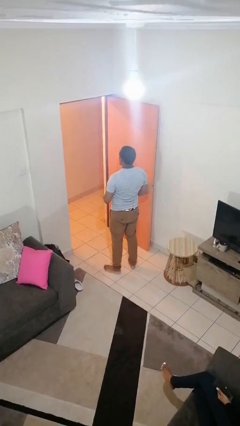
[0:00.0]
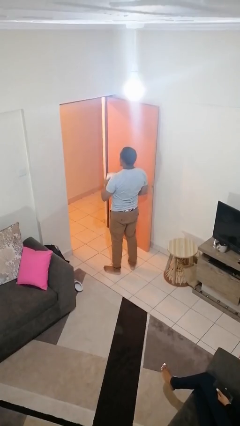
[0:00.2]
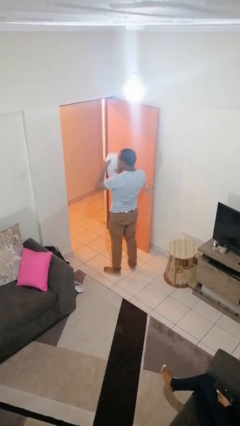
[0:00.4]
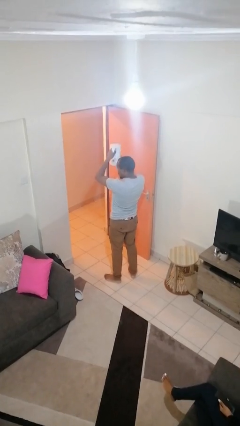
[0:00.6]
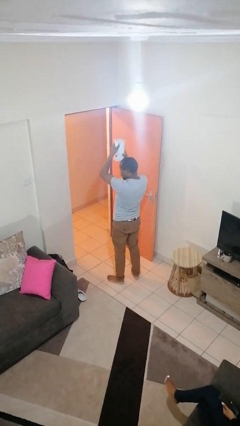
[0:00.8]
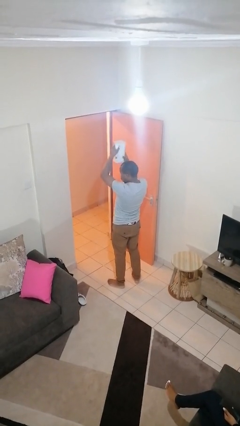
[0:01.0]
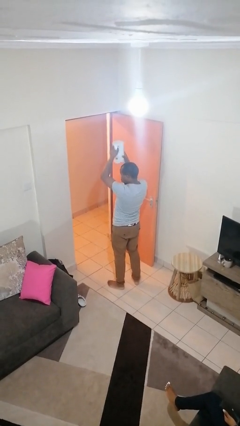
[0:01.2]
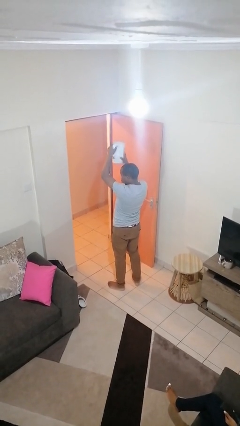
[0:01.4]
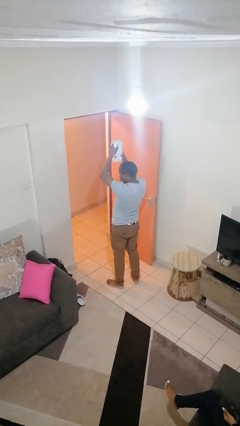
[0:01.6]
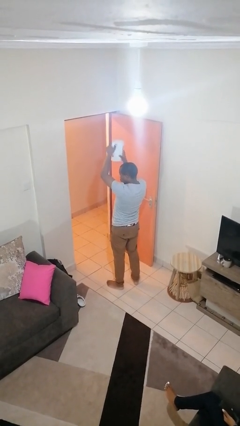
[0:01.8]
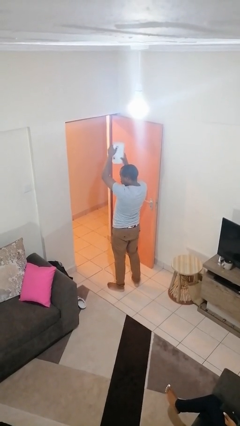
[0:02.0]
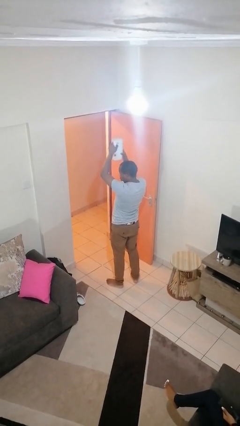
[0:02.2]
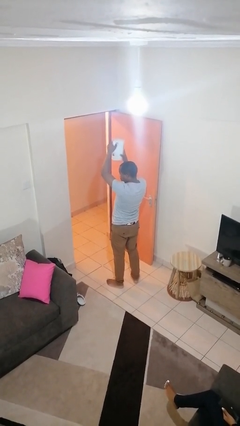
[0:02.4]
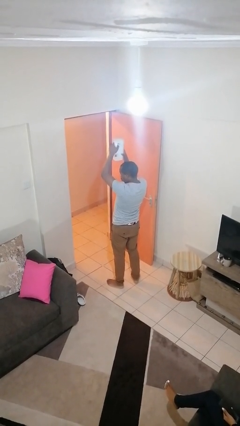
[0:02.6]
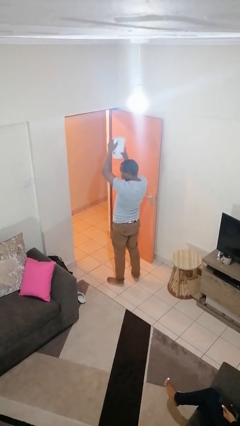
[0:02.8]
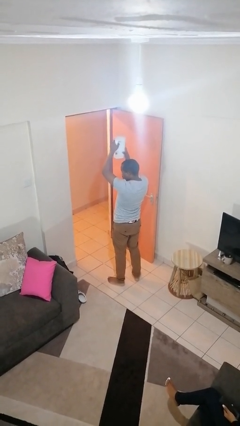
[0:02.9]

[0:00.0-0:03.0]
person holds object above head

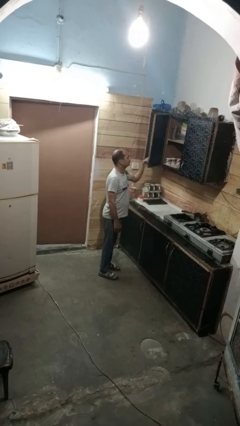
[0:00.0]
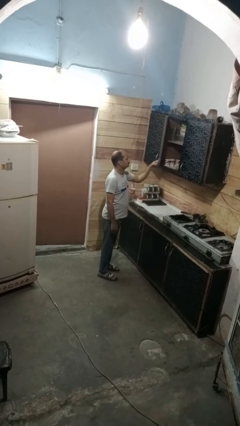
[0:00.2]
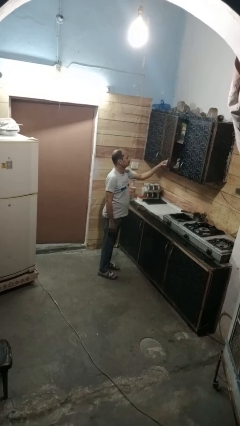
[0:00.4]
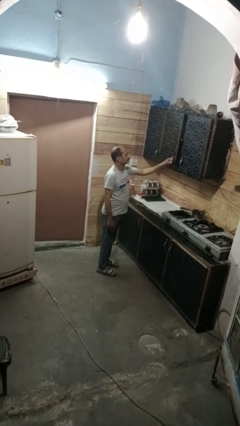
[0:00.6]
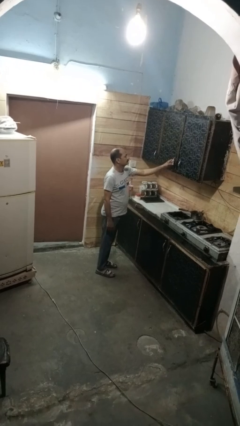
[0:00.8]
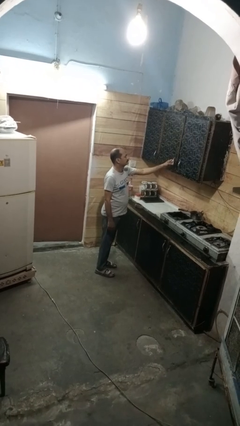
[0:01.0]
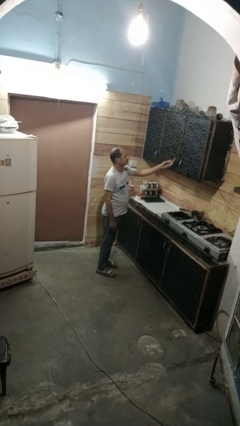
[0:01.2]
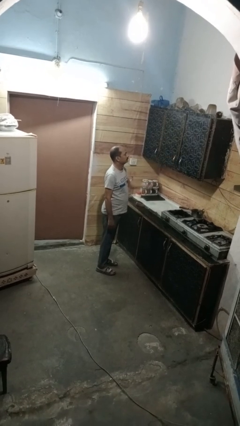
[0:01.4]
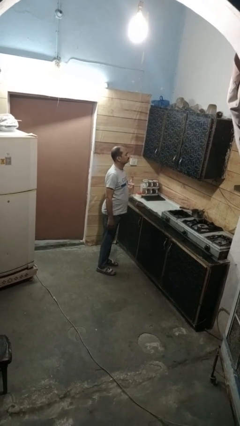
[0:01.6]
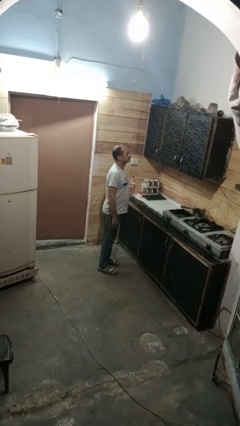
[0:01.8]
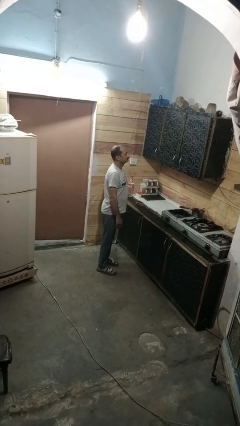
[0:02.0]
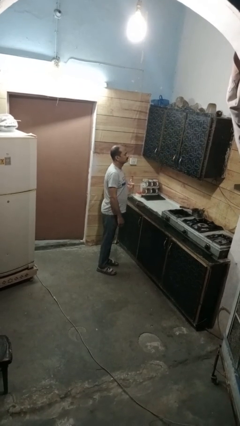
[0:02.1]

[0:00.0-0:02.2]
person closes cabinet

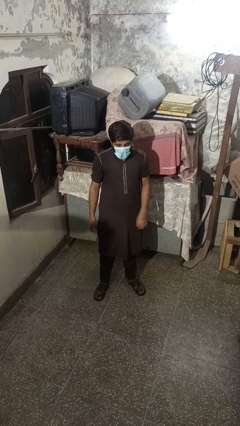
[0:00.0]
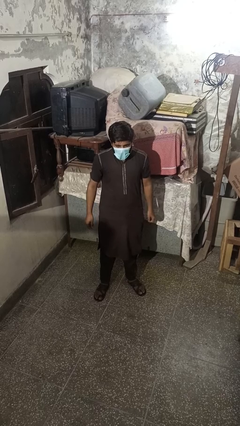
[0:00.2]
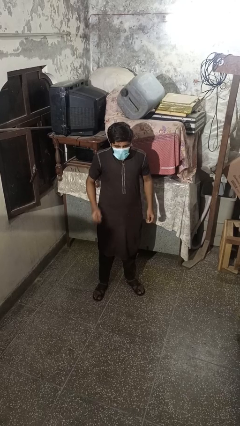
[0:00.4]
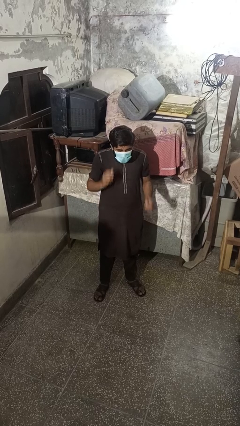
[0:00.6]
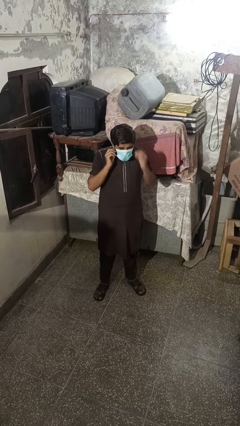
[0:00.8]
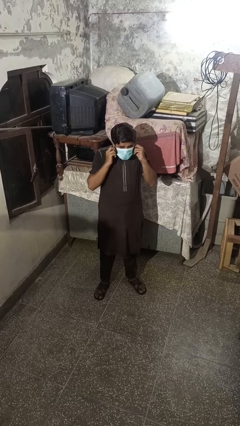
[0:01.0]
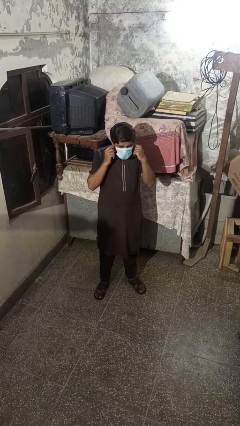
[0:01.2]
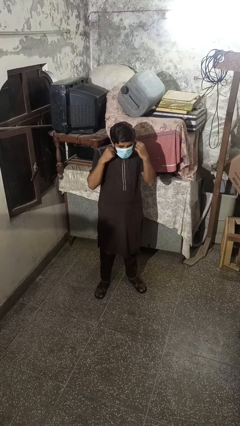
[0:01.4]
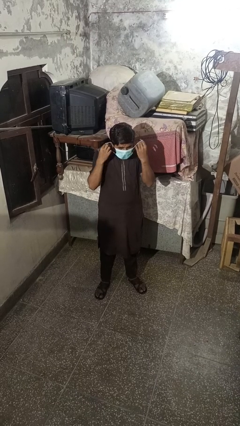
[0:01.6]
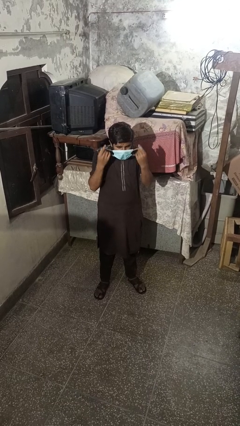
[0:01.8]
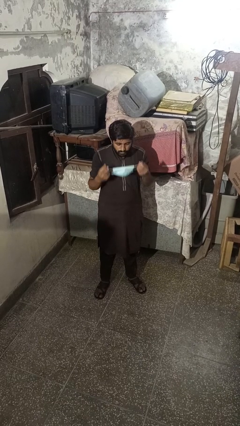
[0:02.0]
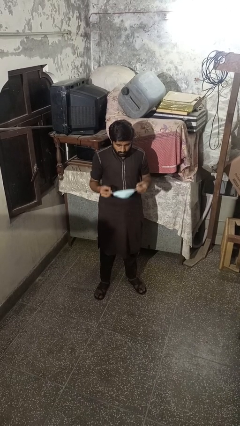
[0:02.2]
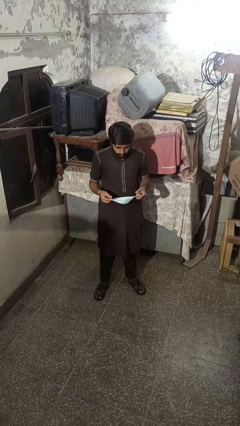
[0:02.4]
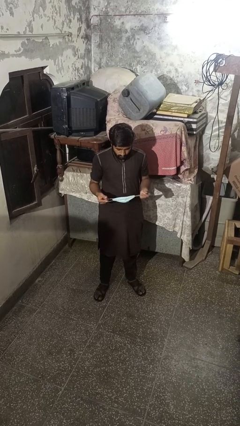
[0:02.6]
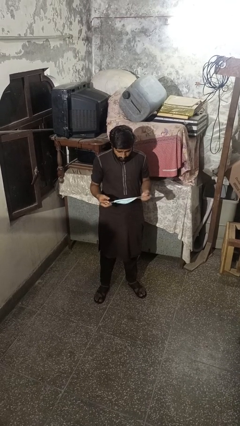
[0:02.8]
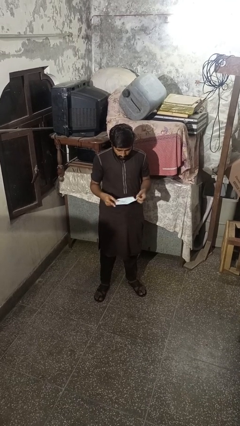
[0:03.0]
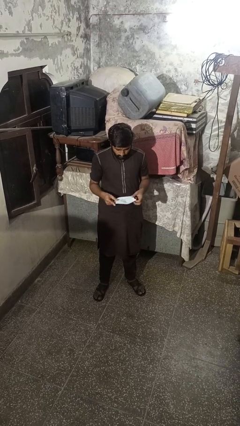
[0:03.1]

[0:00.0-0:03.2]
person takes off facemask

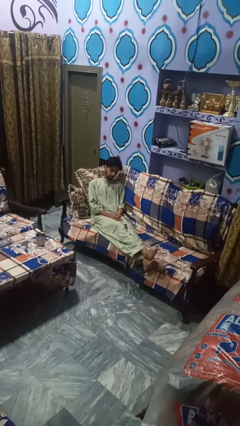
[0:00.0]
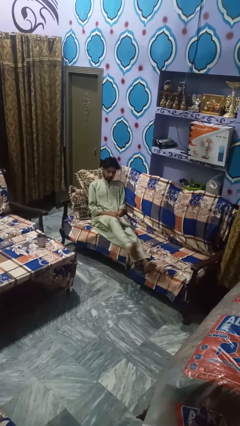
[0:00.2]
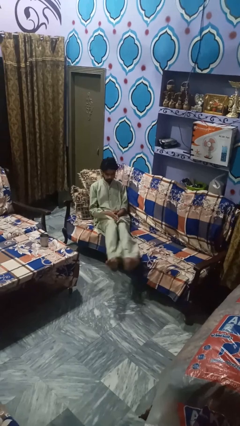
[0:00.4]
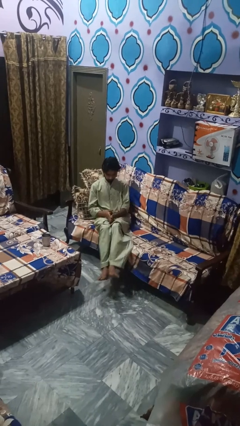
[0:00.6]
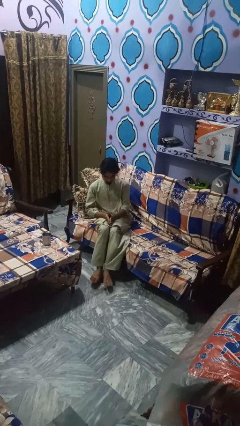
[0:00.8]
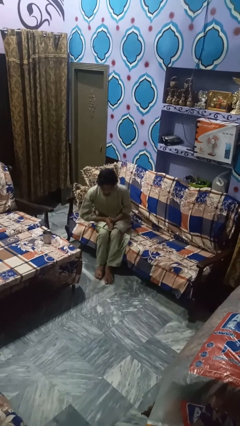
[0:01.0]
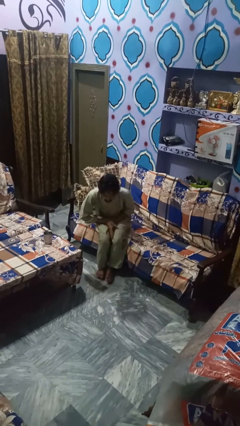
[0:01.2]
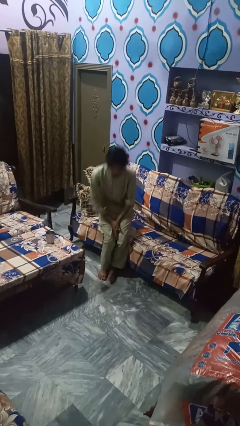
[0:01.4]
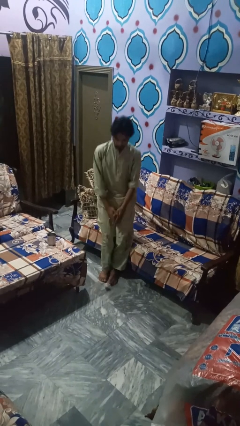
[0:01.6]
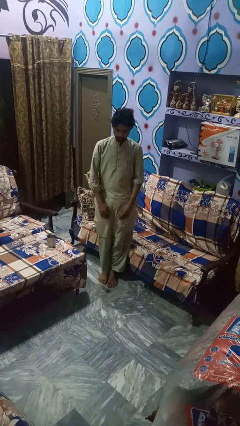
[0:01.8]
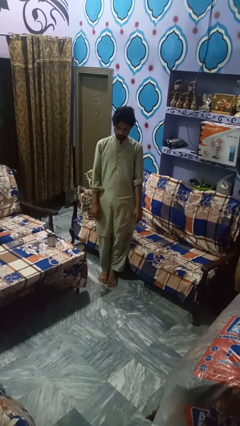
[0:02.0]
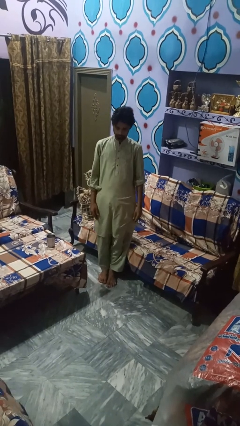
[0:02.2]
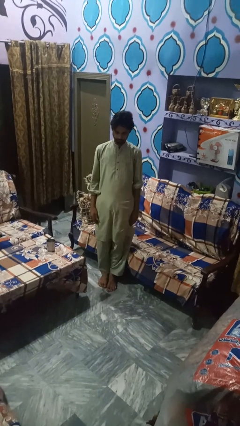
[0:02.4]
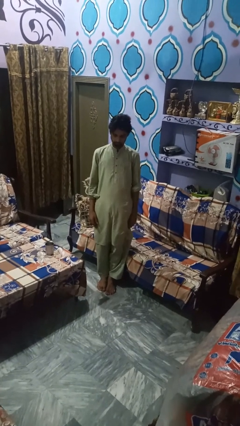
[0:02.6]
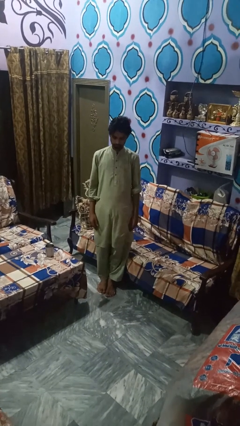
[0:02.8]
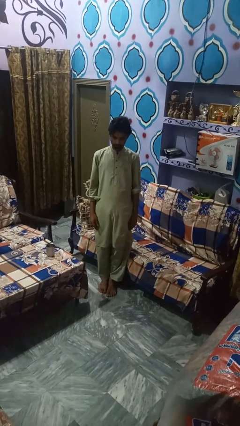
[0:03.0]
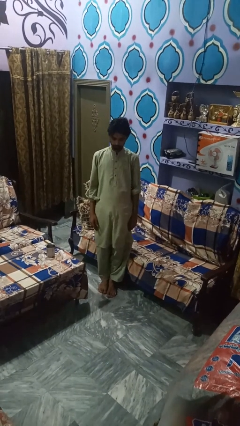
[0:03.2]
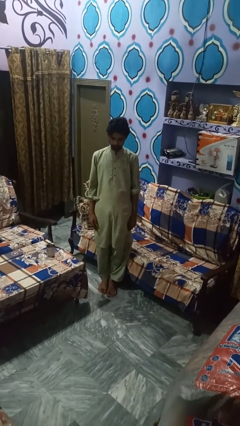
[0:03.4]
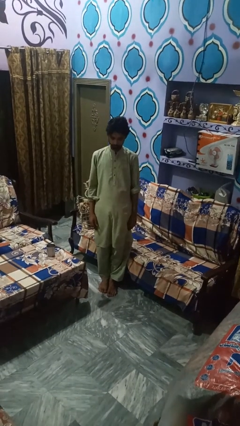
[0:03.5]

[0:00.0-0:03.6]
person stands up

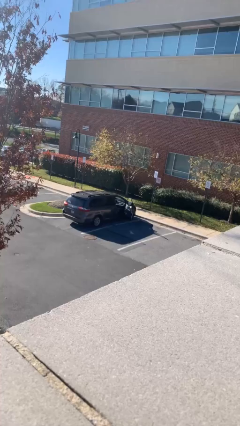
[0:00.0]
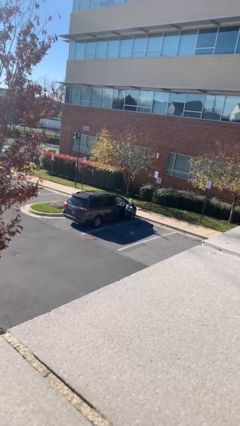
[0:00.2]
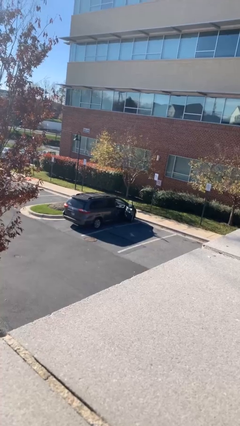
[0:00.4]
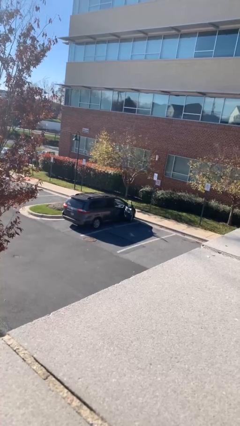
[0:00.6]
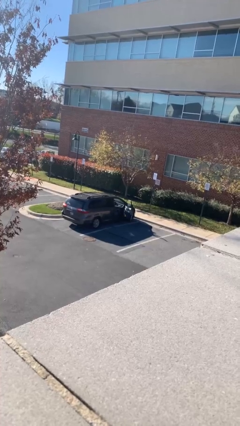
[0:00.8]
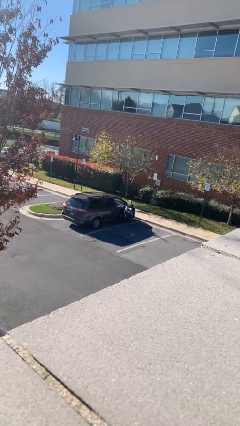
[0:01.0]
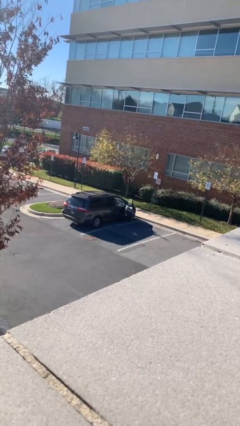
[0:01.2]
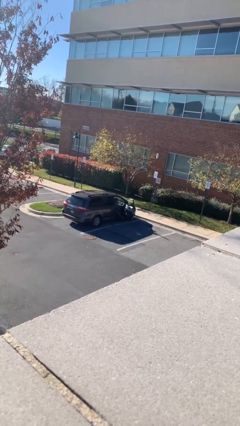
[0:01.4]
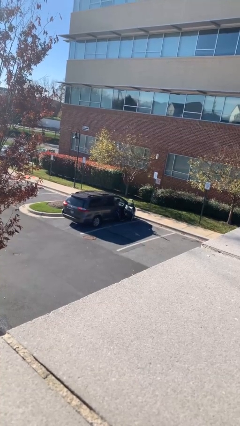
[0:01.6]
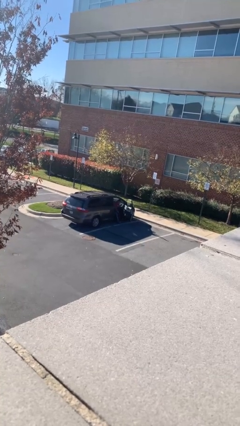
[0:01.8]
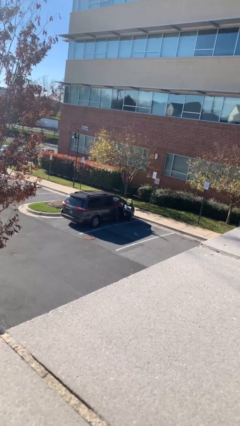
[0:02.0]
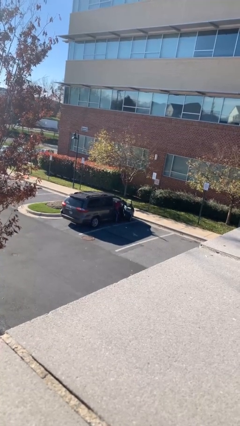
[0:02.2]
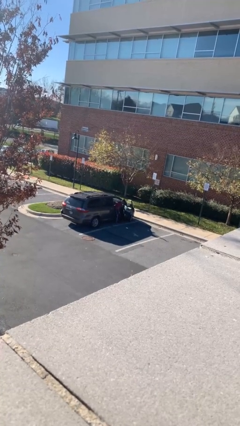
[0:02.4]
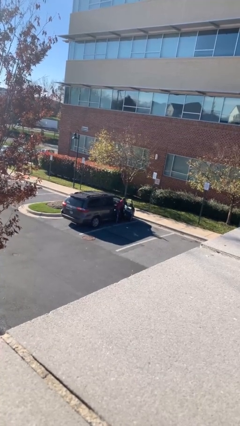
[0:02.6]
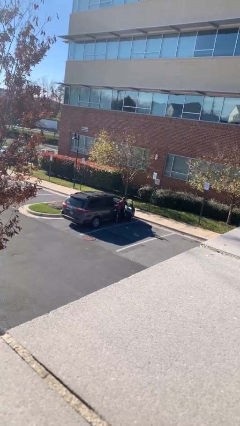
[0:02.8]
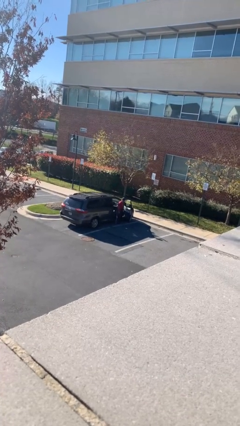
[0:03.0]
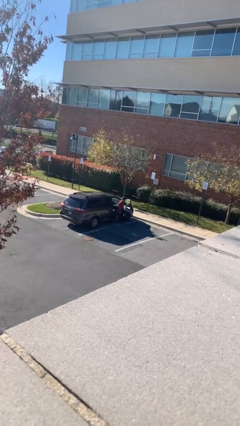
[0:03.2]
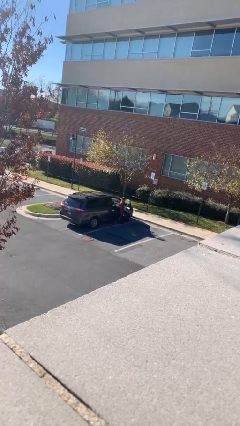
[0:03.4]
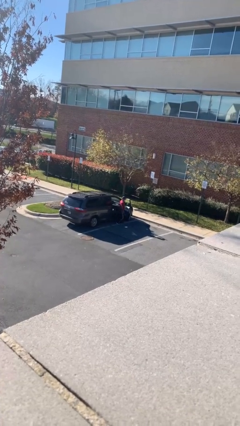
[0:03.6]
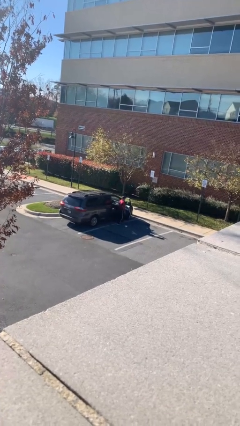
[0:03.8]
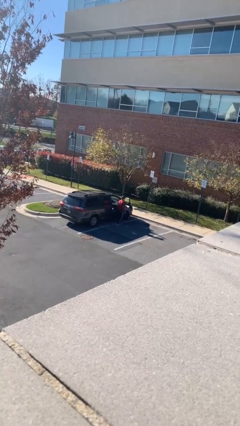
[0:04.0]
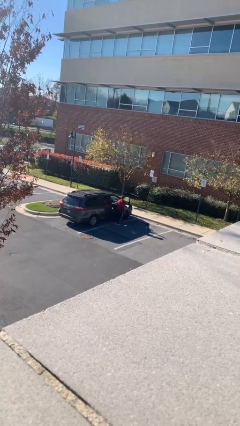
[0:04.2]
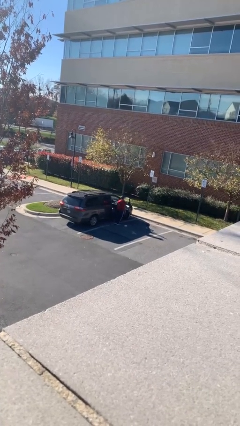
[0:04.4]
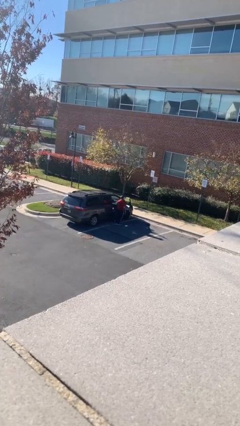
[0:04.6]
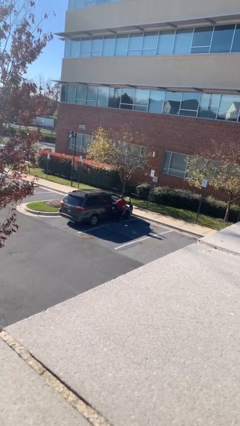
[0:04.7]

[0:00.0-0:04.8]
person exits car

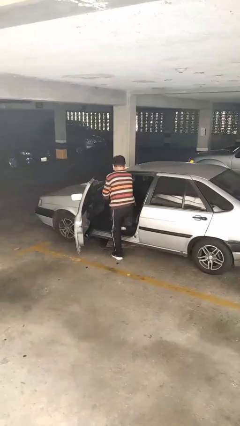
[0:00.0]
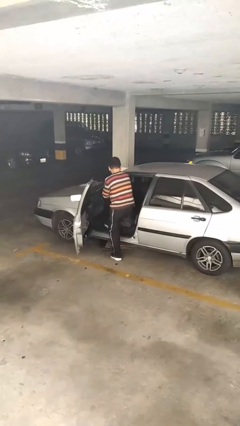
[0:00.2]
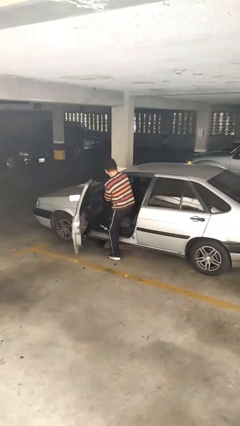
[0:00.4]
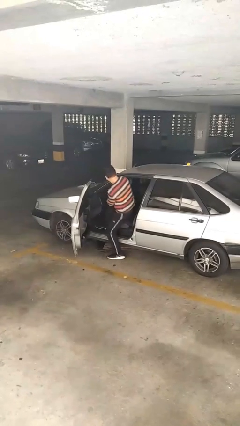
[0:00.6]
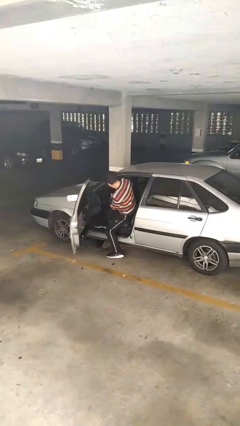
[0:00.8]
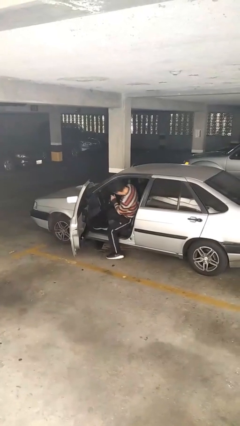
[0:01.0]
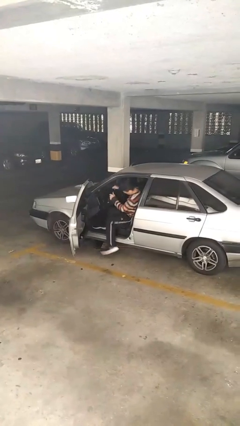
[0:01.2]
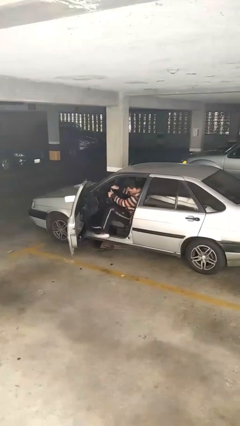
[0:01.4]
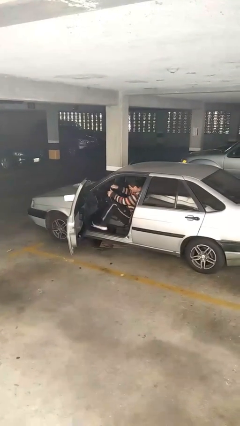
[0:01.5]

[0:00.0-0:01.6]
person enters car
